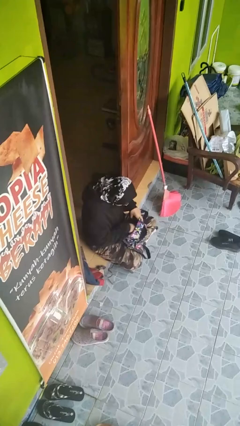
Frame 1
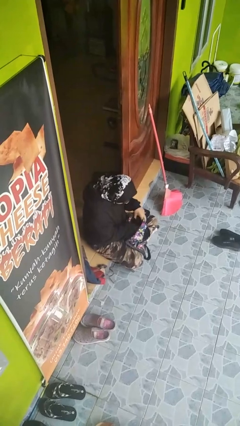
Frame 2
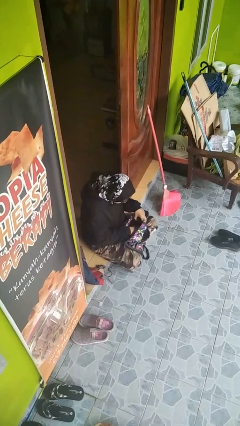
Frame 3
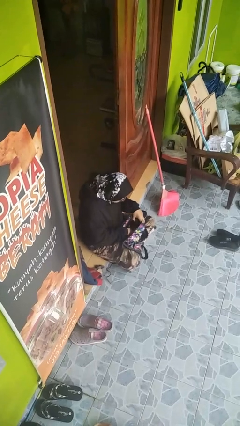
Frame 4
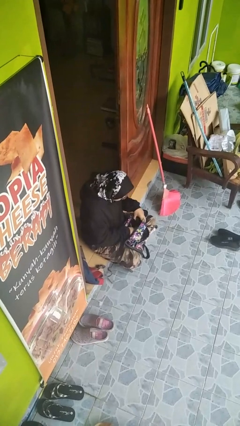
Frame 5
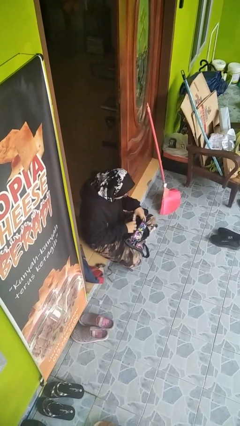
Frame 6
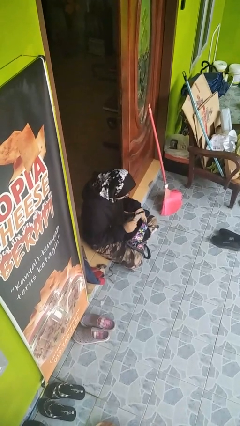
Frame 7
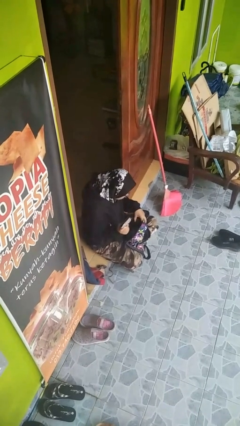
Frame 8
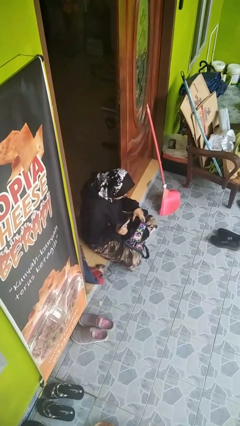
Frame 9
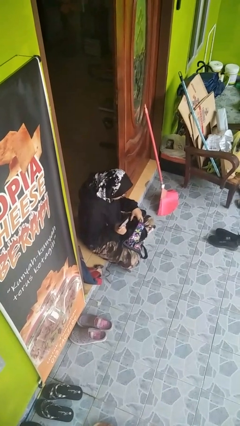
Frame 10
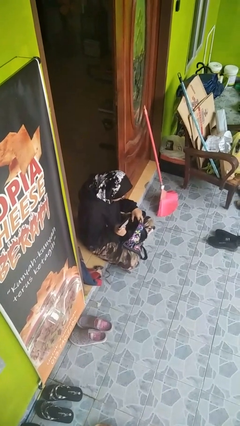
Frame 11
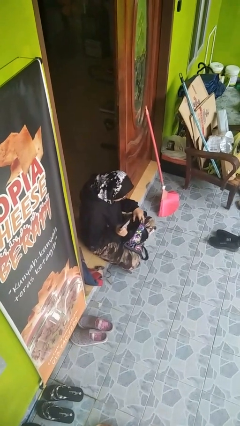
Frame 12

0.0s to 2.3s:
person takes object from purse

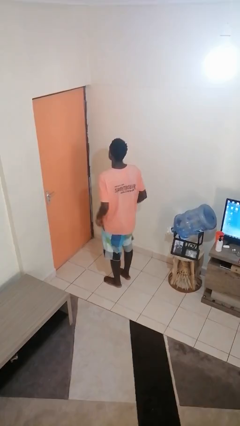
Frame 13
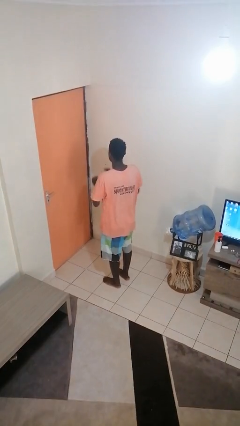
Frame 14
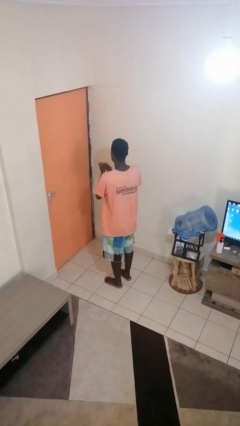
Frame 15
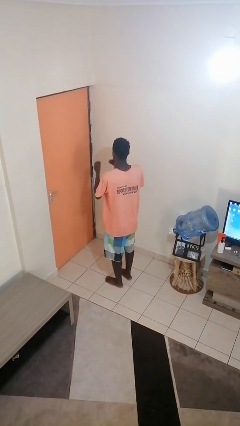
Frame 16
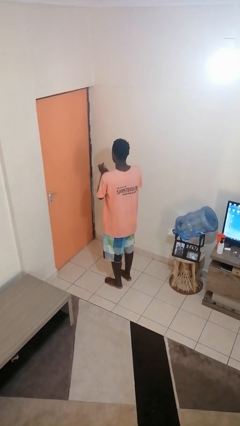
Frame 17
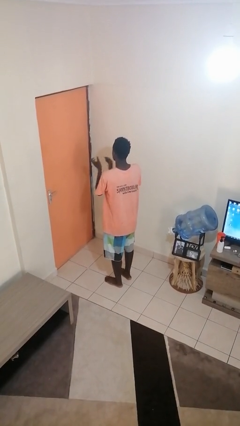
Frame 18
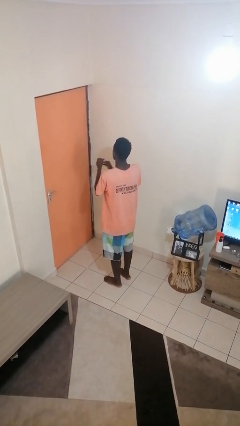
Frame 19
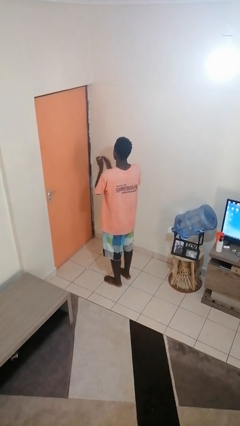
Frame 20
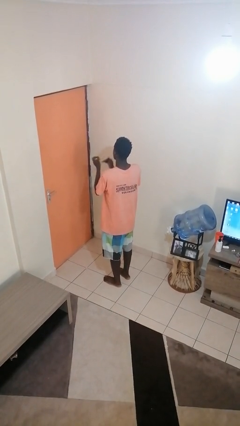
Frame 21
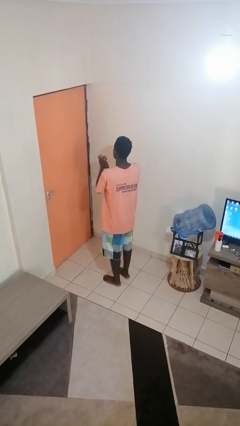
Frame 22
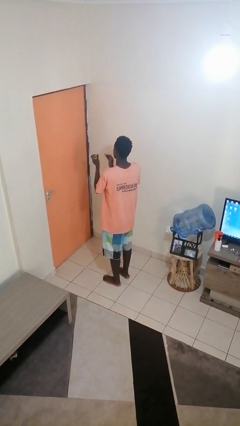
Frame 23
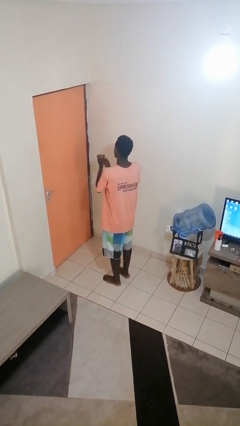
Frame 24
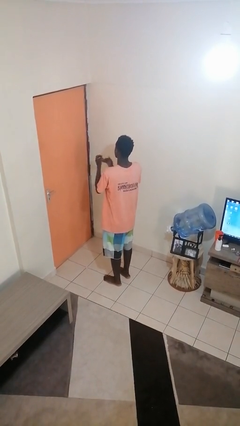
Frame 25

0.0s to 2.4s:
person claps hands

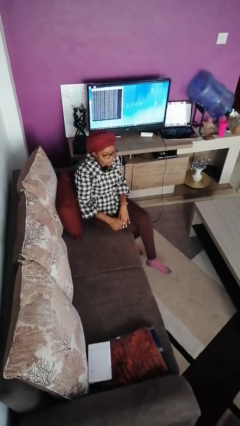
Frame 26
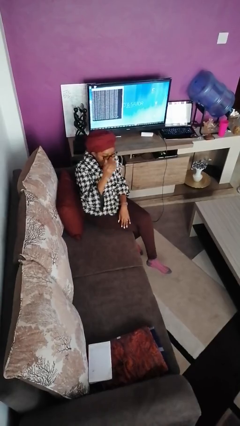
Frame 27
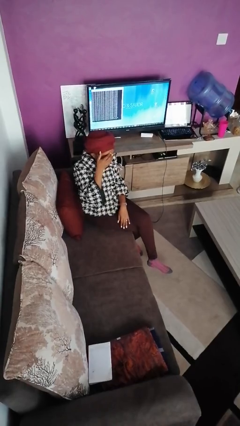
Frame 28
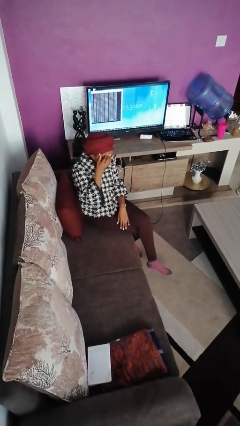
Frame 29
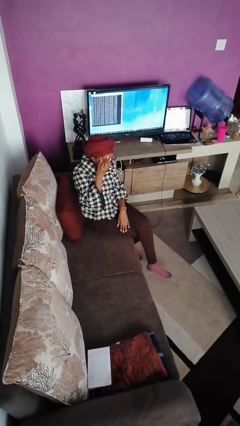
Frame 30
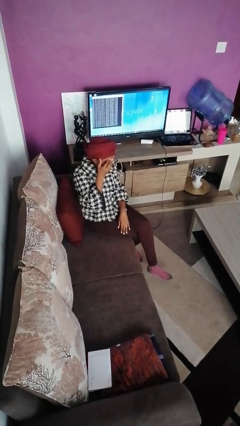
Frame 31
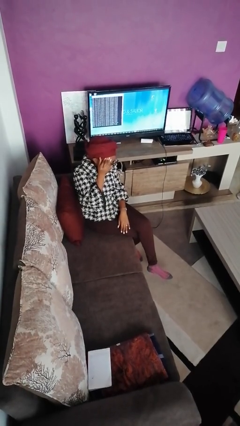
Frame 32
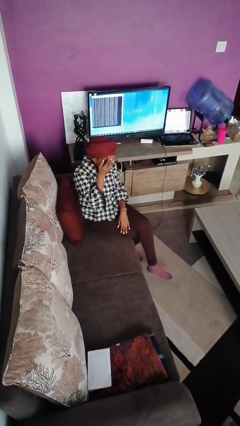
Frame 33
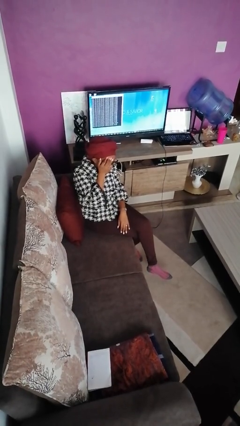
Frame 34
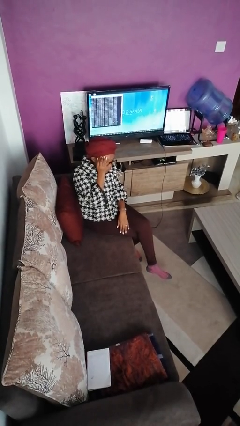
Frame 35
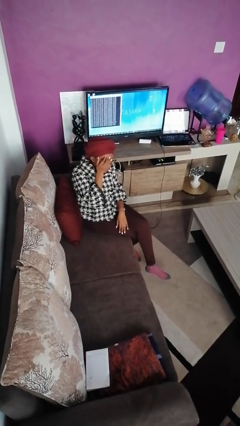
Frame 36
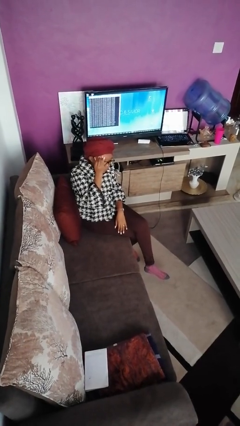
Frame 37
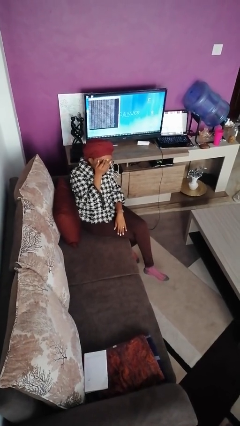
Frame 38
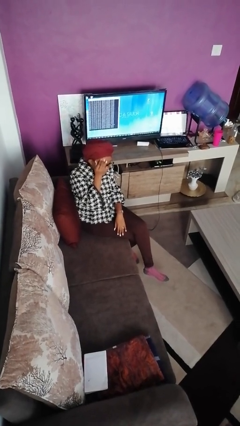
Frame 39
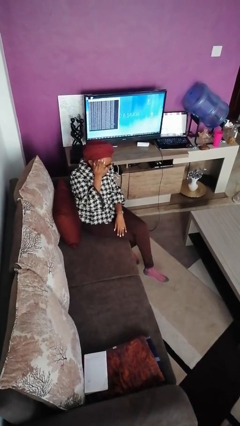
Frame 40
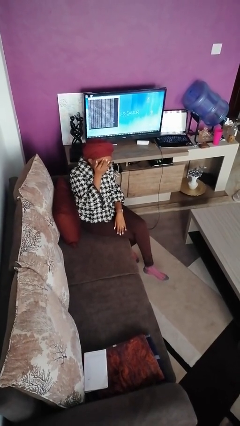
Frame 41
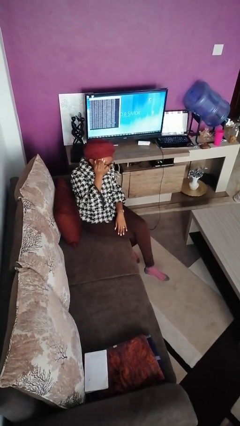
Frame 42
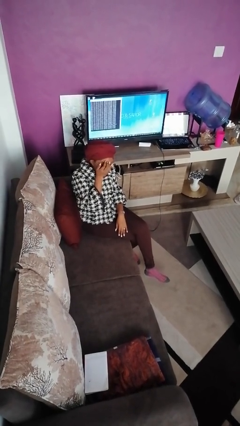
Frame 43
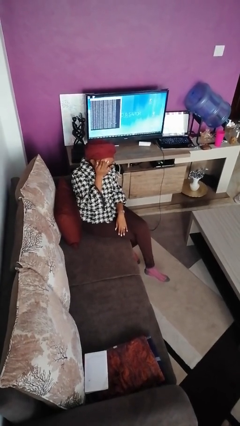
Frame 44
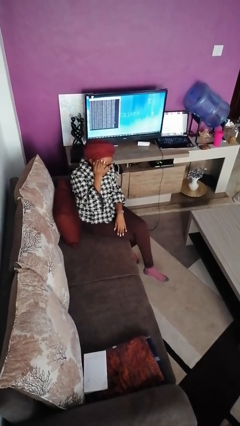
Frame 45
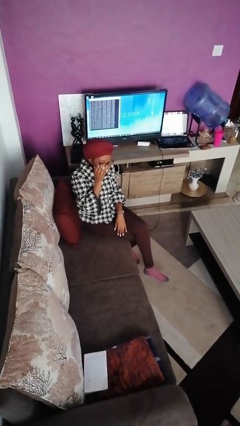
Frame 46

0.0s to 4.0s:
person scratches face

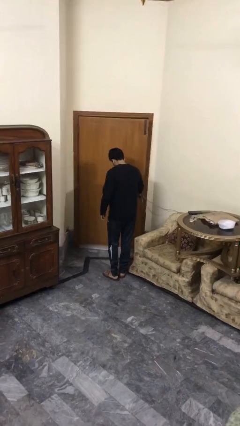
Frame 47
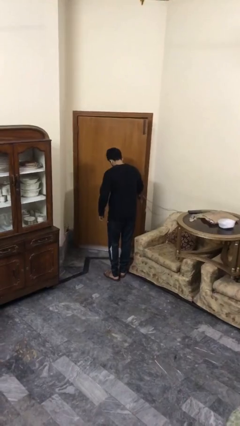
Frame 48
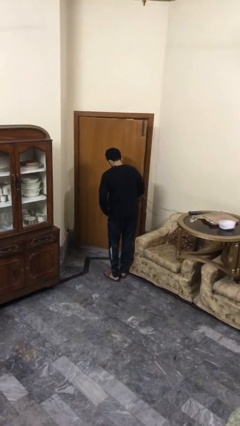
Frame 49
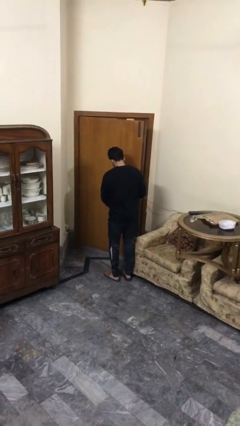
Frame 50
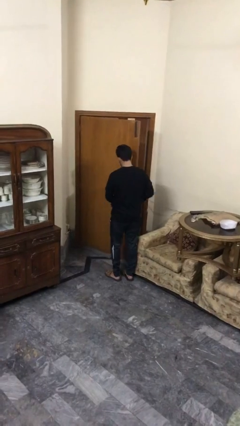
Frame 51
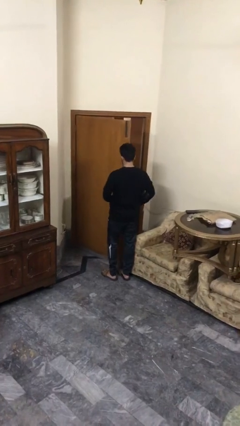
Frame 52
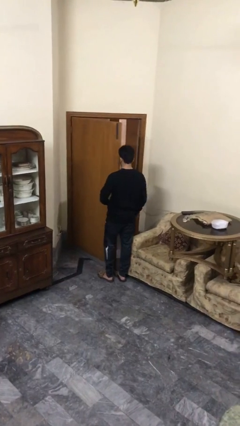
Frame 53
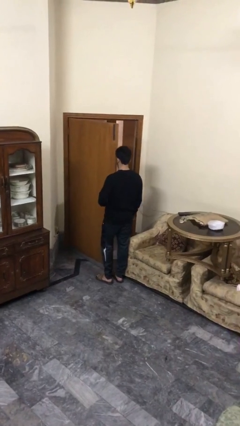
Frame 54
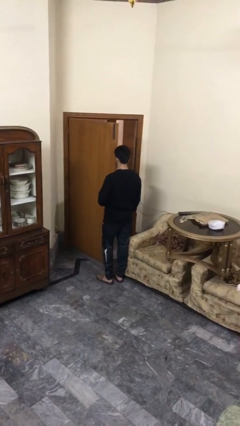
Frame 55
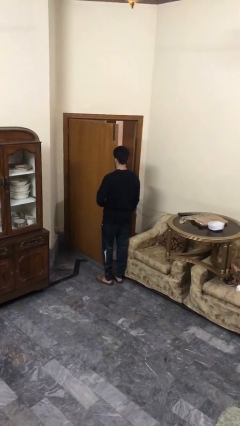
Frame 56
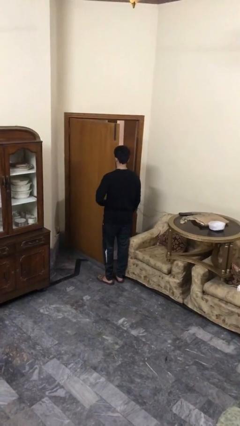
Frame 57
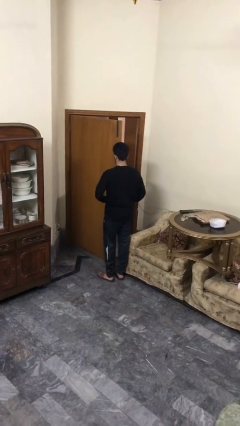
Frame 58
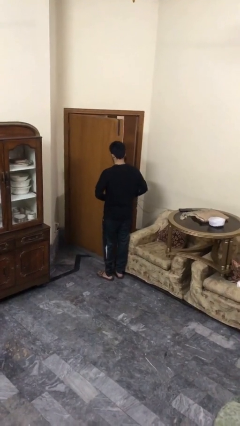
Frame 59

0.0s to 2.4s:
person opens facility door

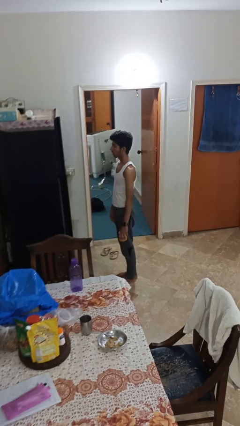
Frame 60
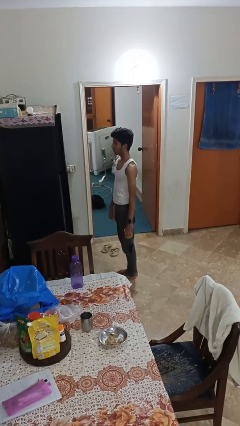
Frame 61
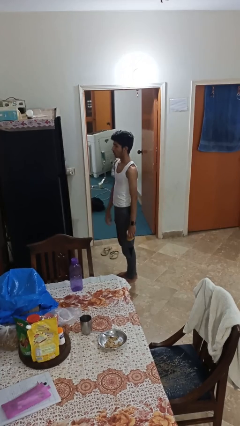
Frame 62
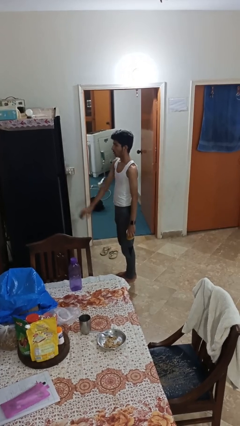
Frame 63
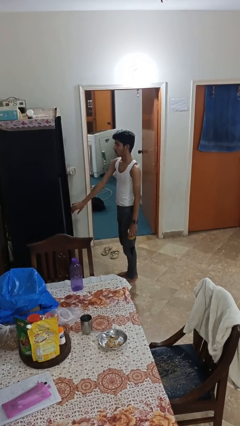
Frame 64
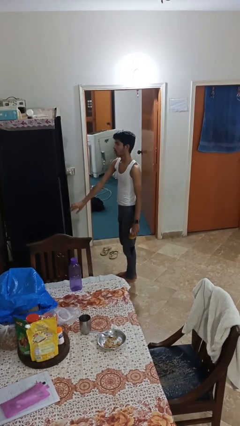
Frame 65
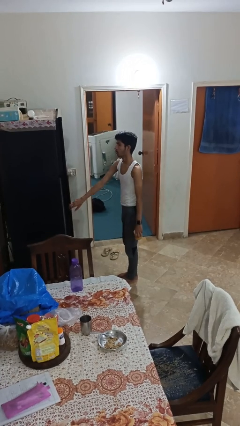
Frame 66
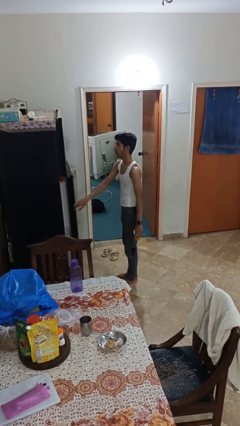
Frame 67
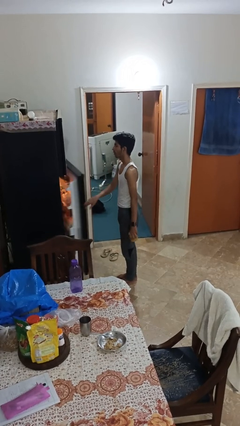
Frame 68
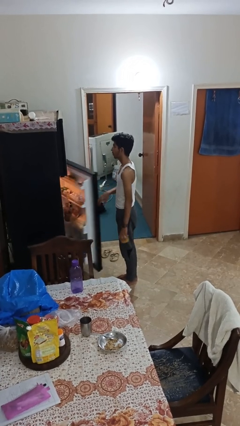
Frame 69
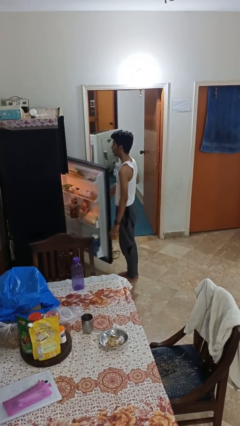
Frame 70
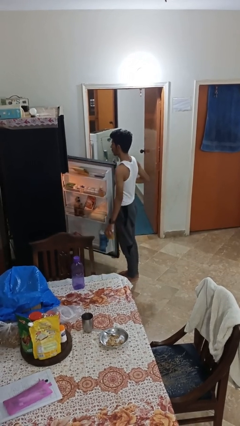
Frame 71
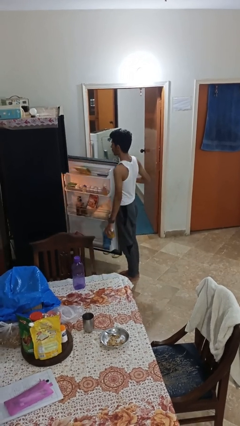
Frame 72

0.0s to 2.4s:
person opens refrigerator

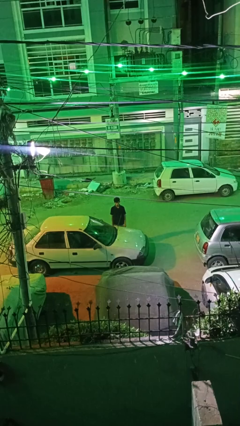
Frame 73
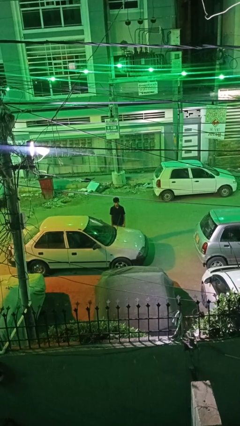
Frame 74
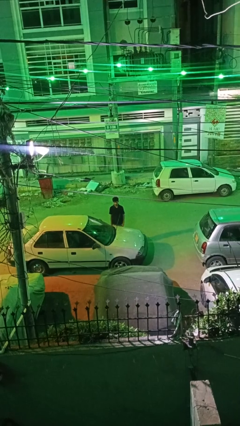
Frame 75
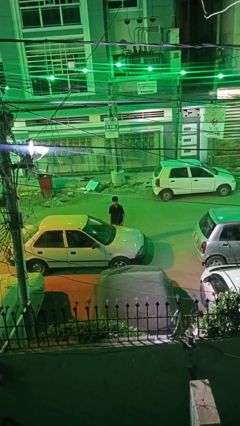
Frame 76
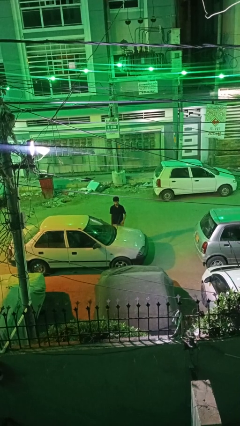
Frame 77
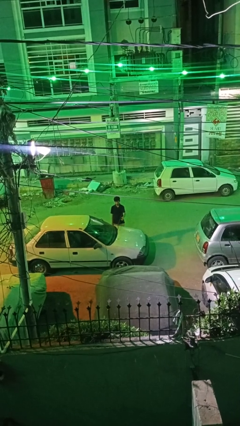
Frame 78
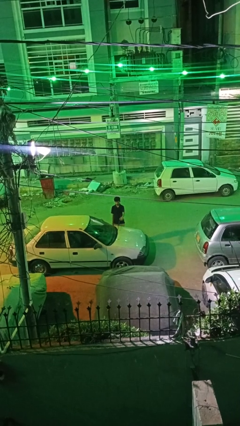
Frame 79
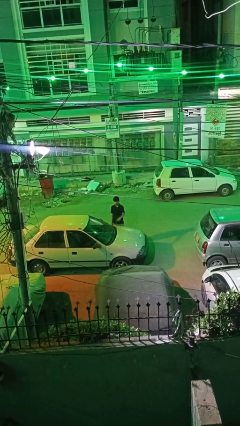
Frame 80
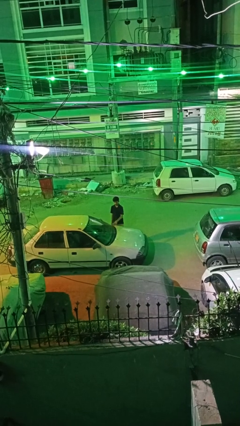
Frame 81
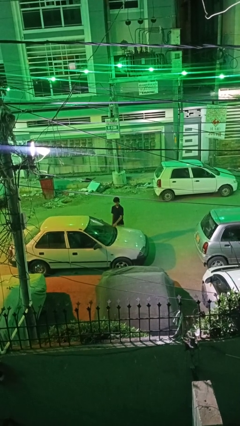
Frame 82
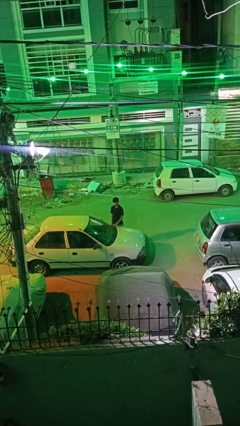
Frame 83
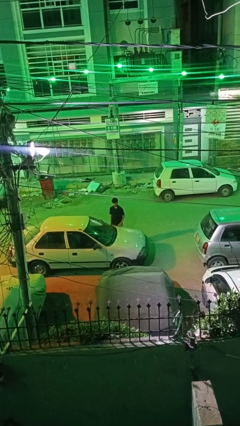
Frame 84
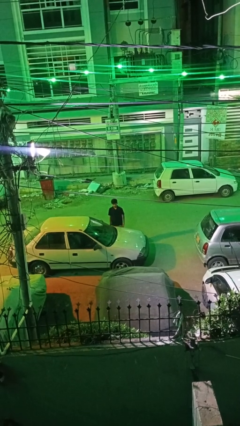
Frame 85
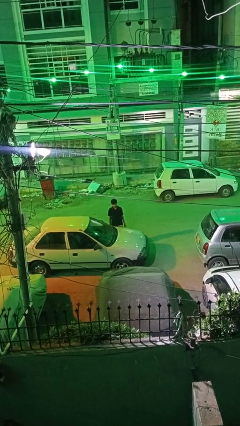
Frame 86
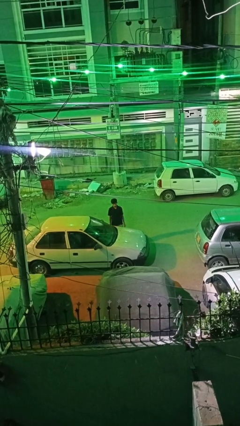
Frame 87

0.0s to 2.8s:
person flips down car wipers

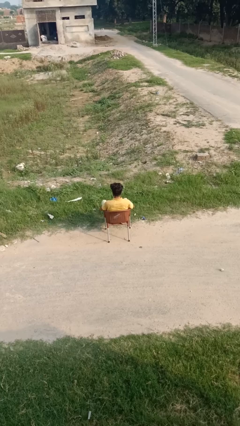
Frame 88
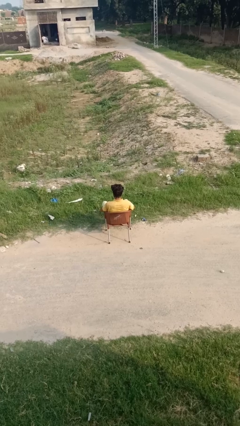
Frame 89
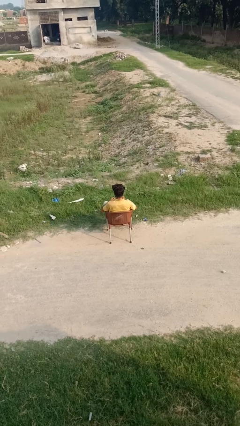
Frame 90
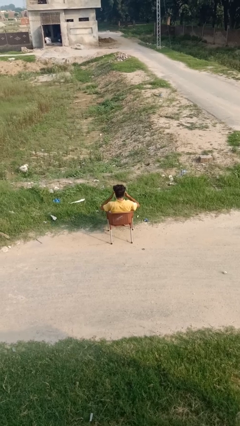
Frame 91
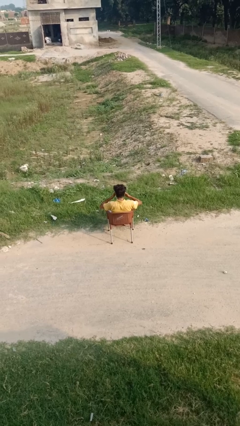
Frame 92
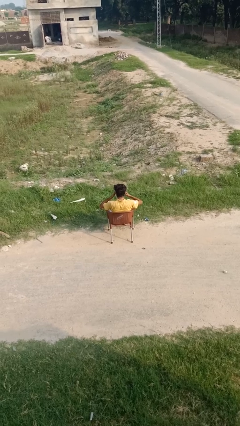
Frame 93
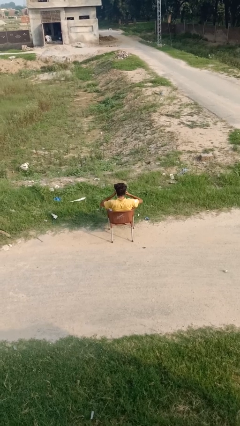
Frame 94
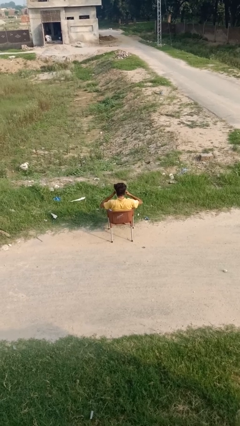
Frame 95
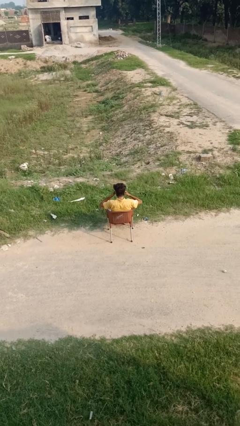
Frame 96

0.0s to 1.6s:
person rubs eyes
